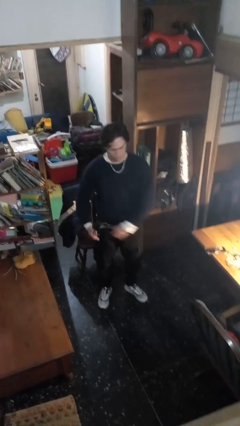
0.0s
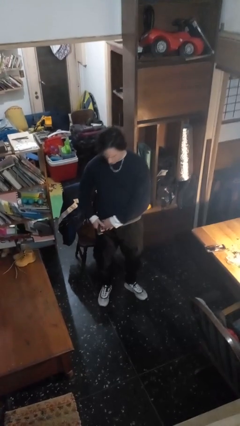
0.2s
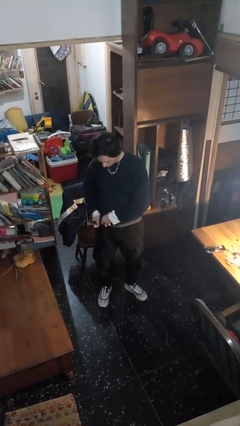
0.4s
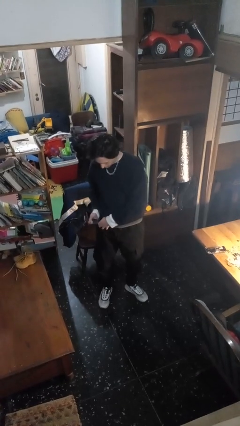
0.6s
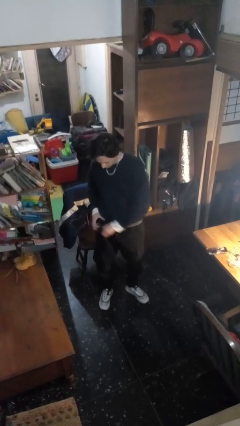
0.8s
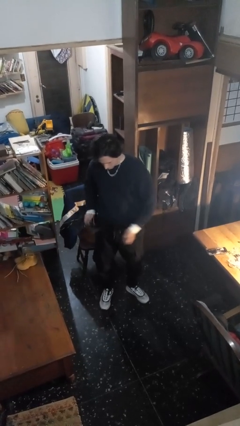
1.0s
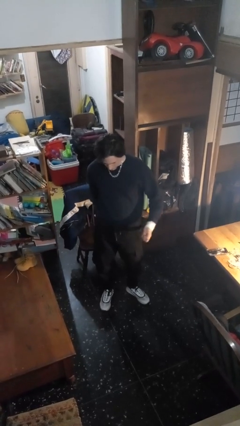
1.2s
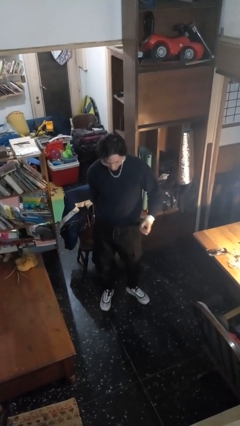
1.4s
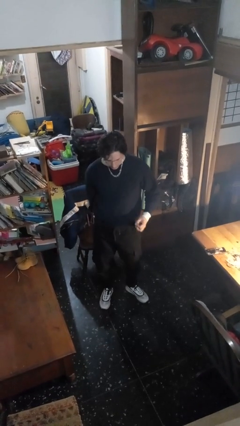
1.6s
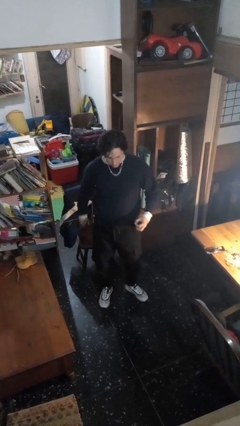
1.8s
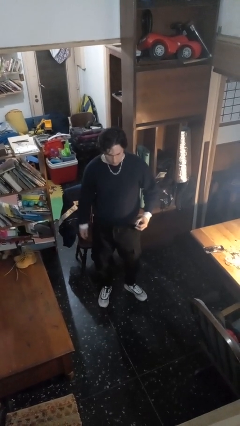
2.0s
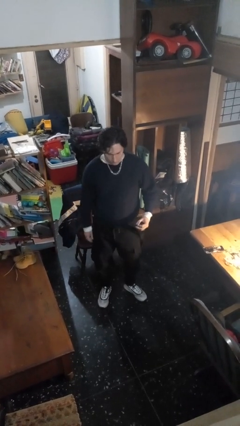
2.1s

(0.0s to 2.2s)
person takes off belt

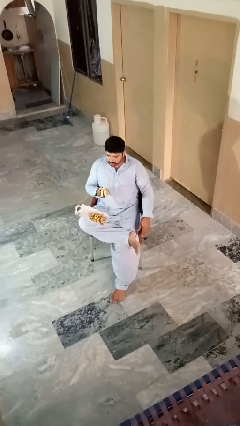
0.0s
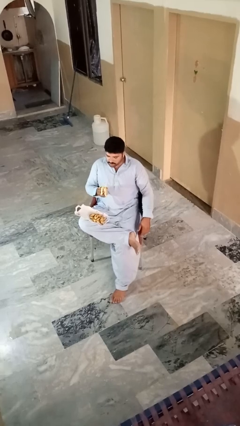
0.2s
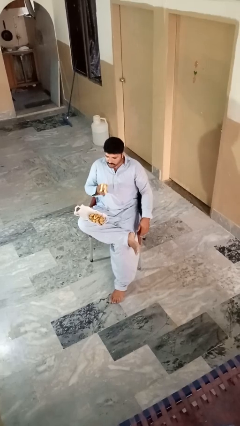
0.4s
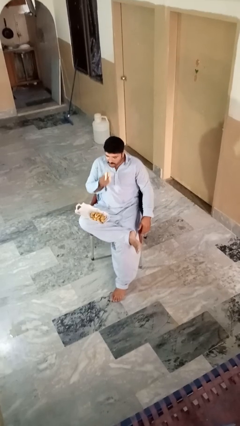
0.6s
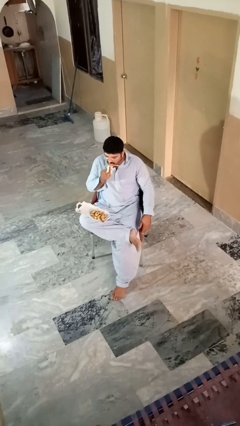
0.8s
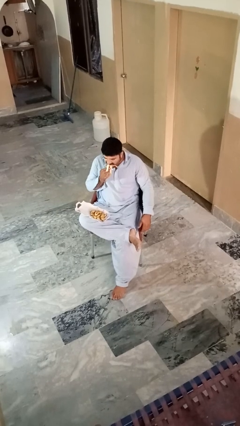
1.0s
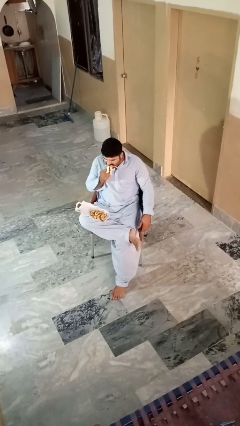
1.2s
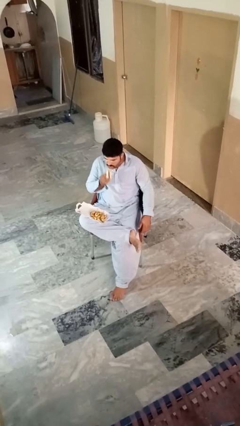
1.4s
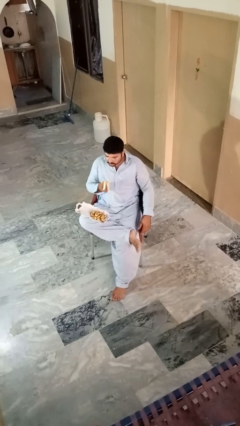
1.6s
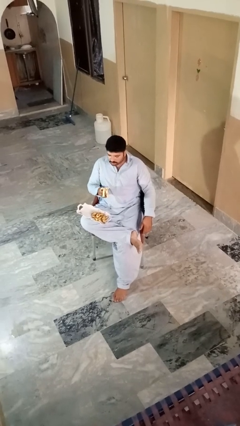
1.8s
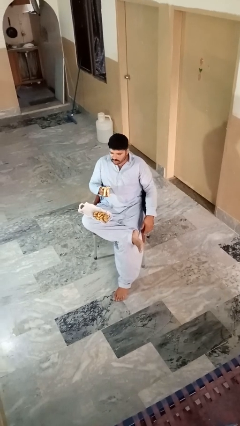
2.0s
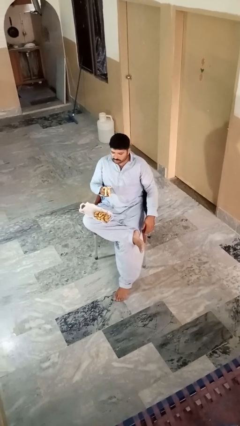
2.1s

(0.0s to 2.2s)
person eats banana

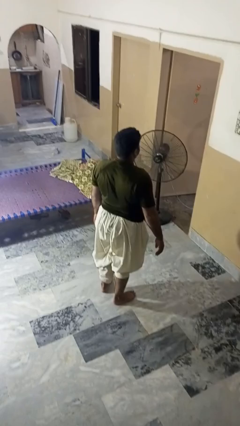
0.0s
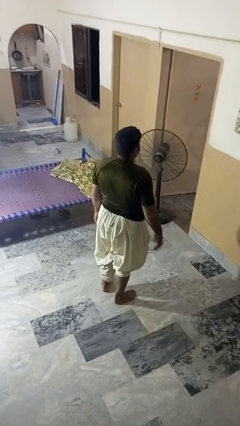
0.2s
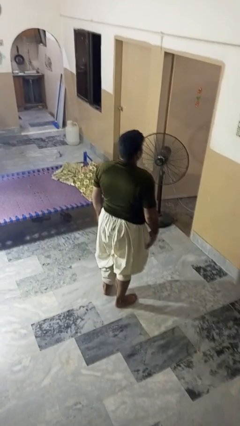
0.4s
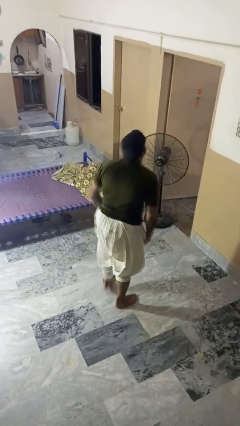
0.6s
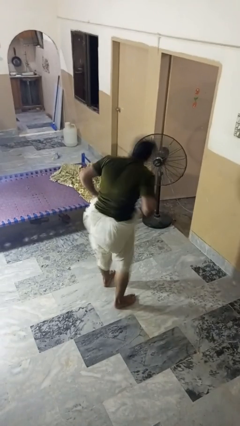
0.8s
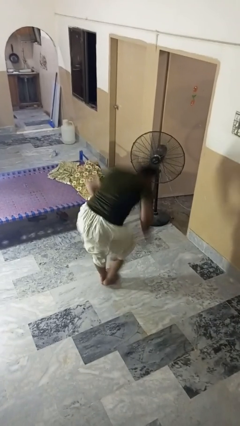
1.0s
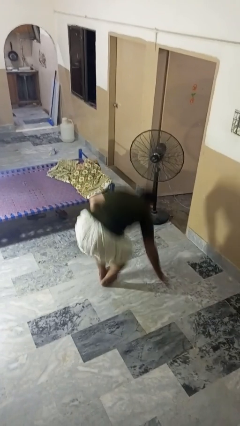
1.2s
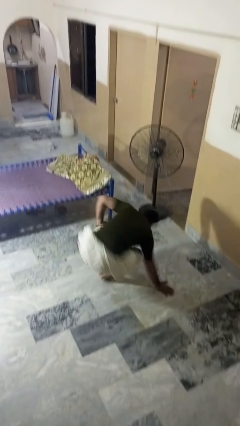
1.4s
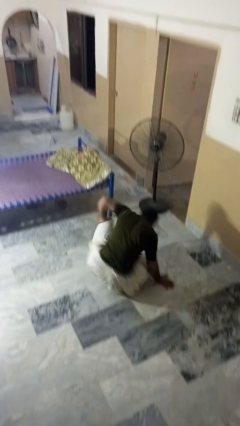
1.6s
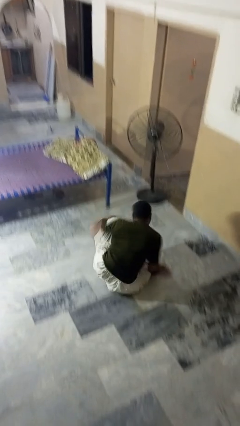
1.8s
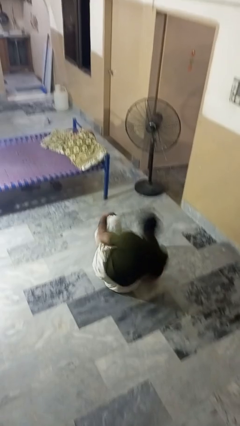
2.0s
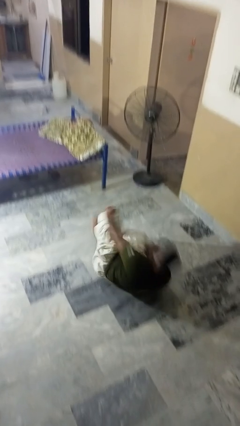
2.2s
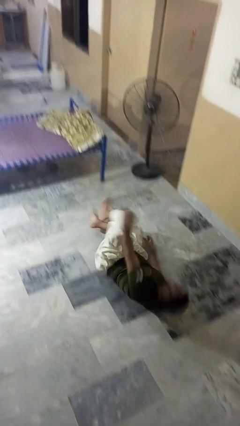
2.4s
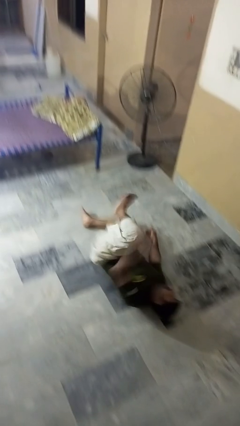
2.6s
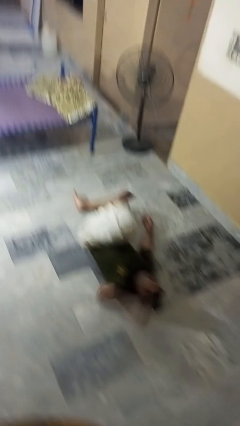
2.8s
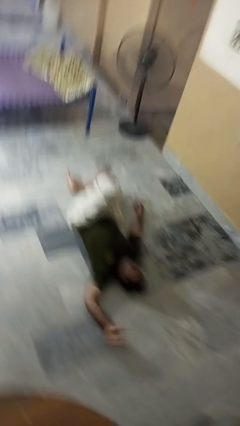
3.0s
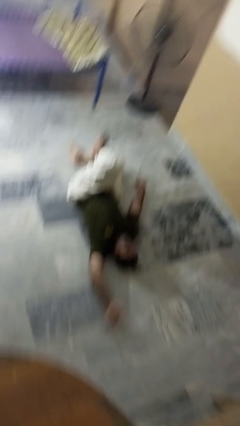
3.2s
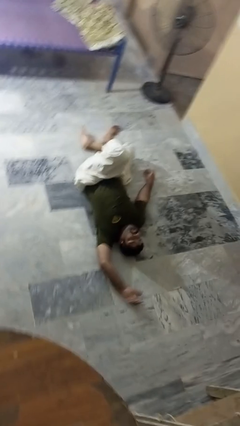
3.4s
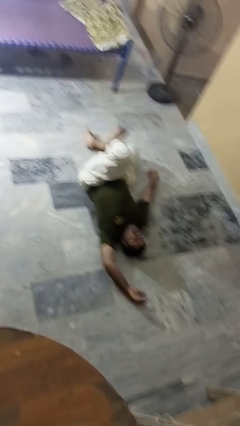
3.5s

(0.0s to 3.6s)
person falls while standing

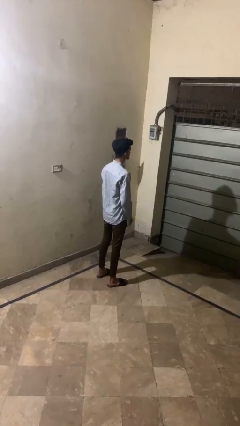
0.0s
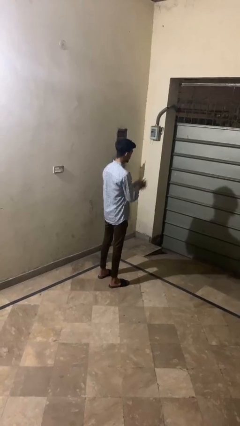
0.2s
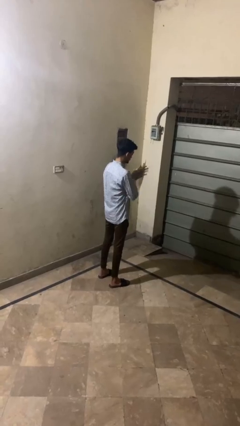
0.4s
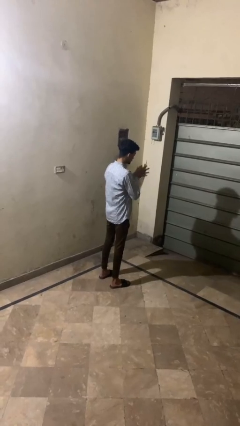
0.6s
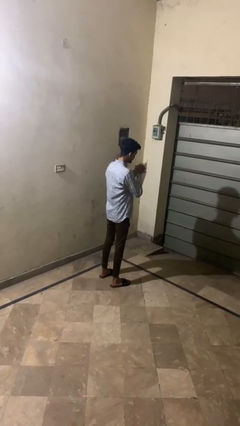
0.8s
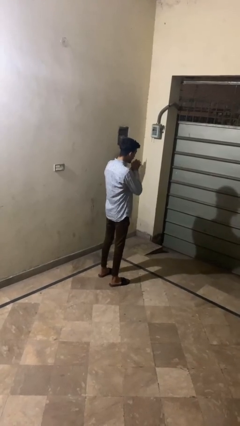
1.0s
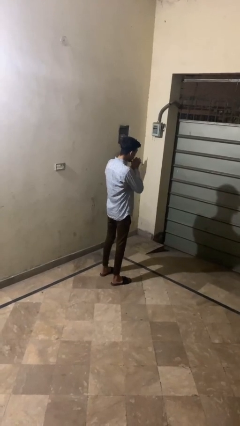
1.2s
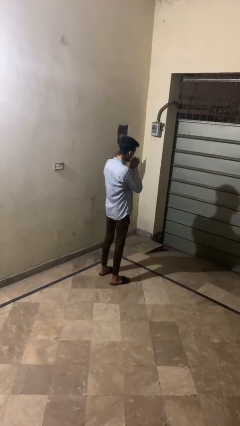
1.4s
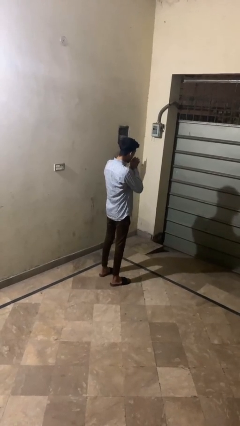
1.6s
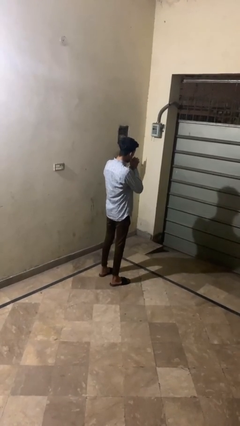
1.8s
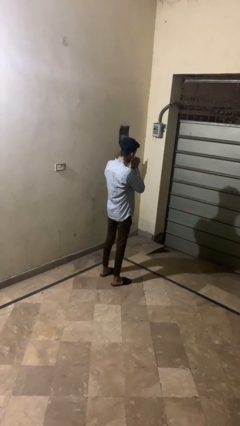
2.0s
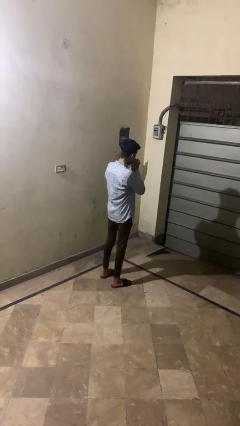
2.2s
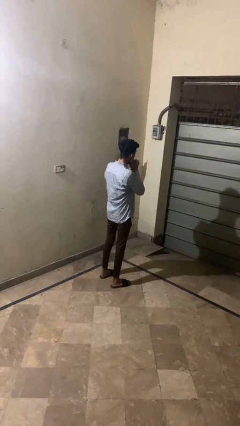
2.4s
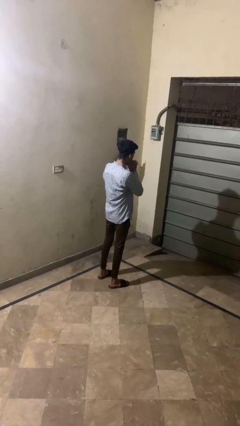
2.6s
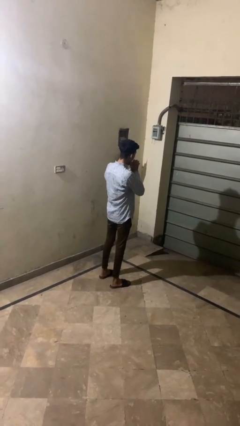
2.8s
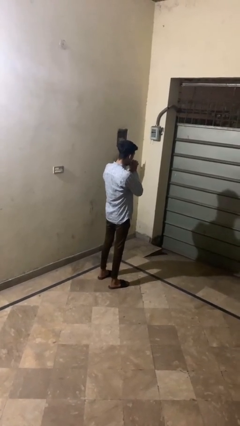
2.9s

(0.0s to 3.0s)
person blows into hands

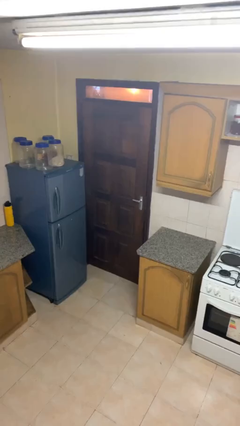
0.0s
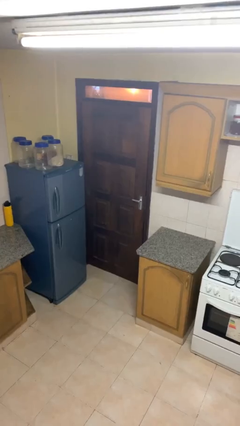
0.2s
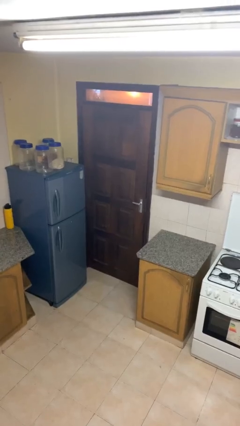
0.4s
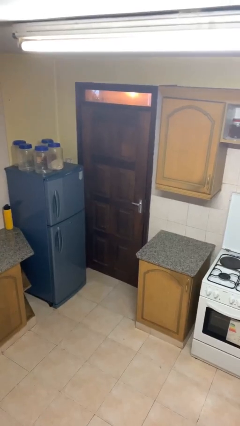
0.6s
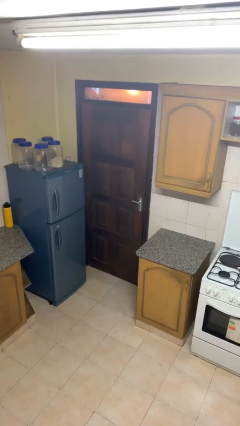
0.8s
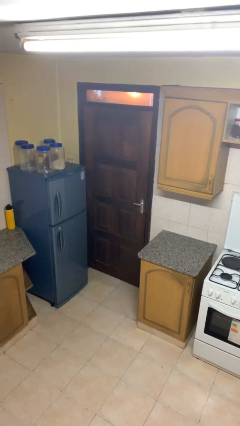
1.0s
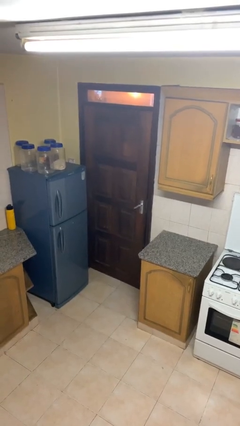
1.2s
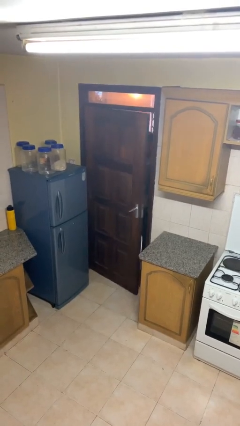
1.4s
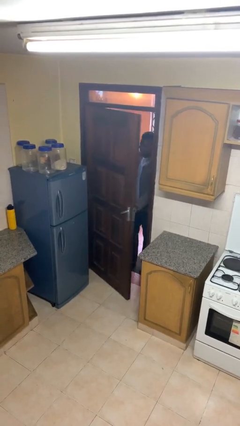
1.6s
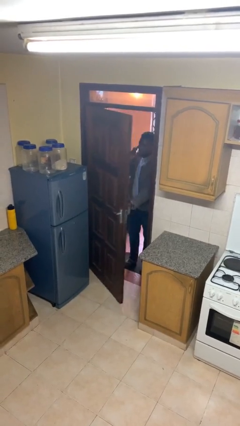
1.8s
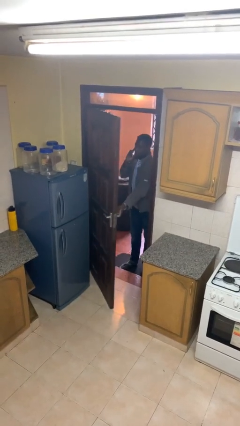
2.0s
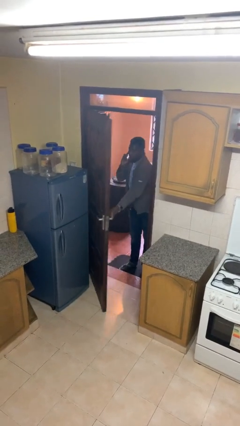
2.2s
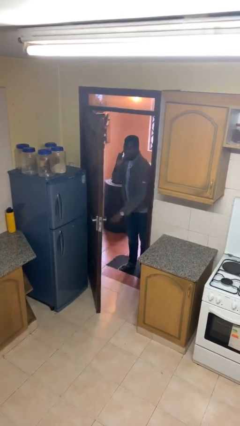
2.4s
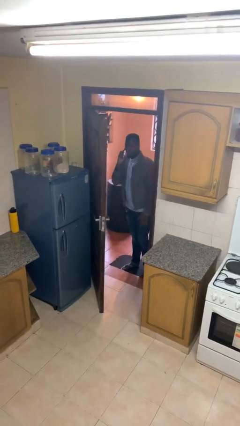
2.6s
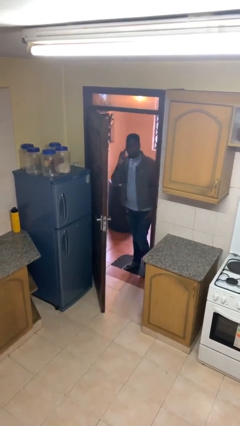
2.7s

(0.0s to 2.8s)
person opens facility door

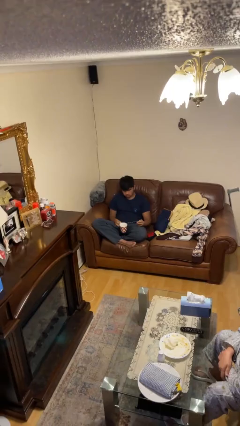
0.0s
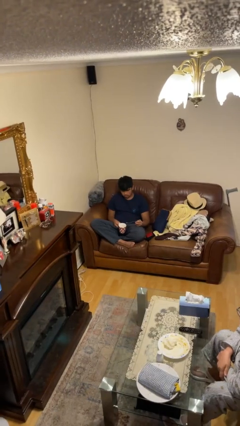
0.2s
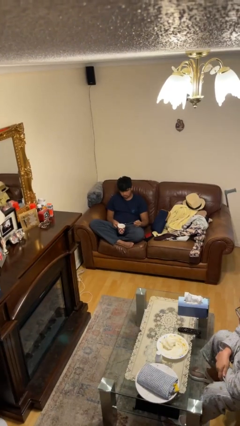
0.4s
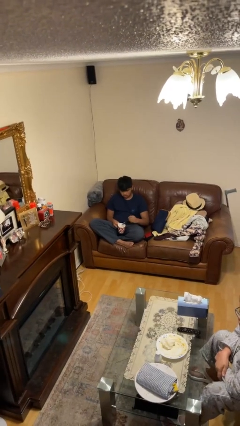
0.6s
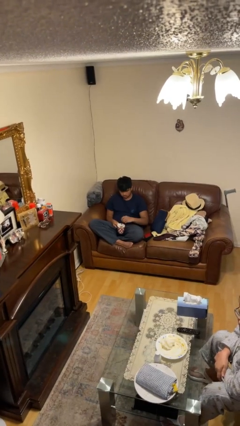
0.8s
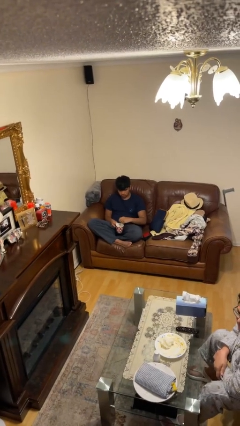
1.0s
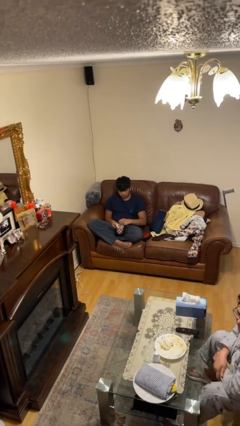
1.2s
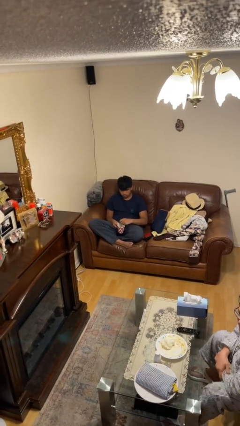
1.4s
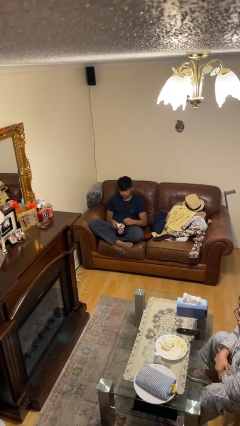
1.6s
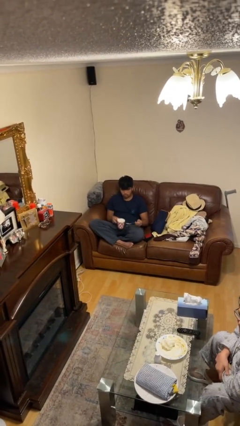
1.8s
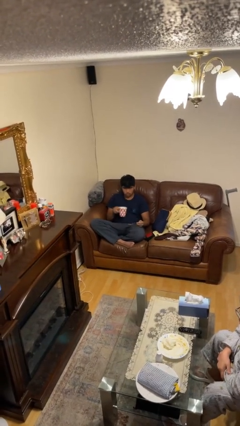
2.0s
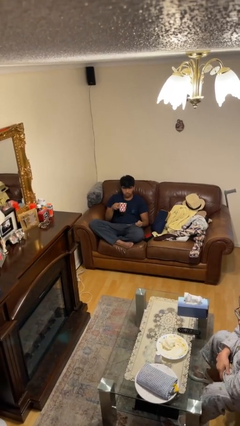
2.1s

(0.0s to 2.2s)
person stirs mug

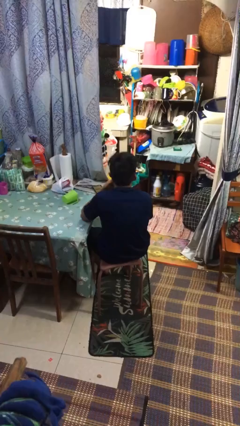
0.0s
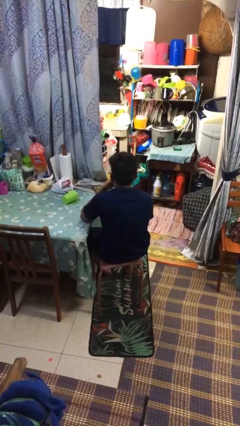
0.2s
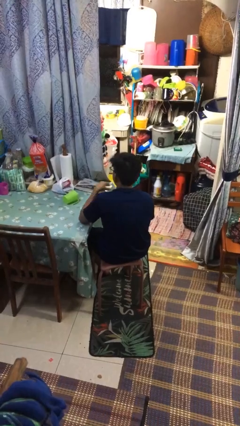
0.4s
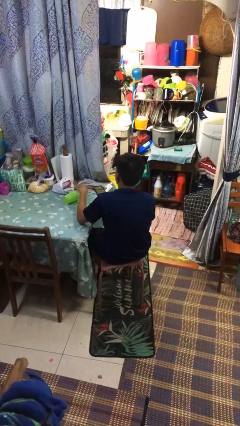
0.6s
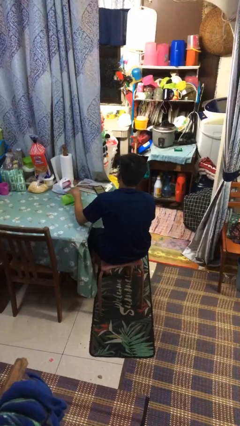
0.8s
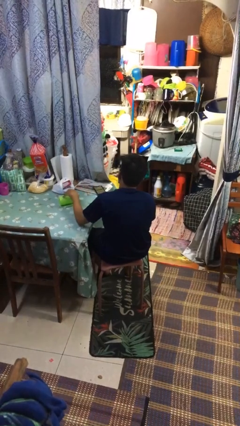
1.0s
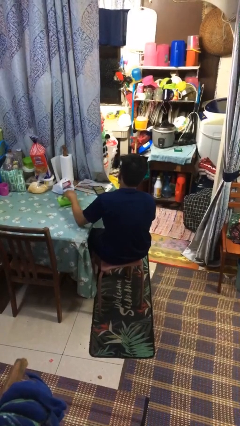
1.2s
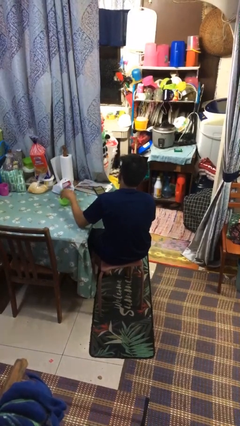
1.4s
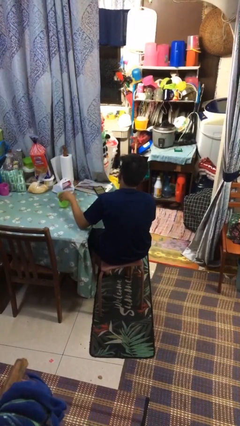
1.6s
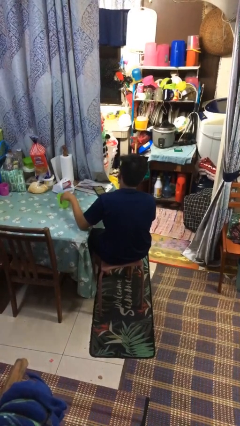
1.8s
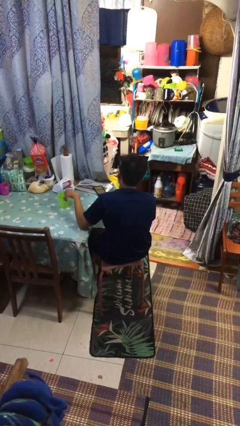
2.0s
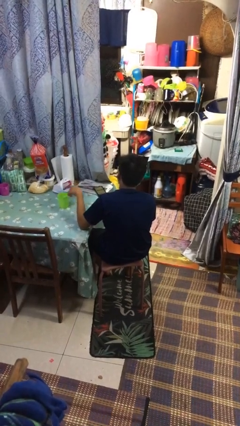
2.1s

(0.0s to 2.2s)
person sets upright glass
